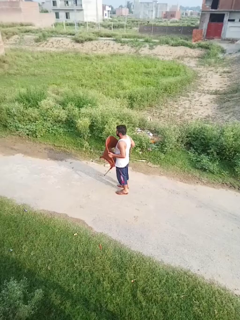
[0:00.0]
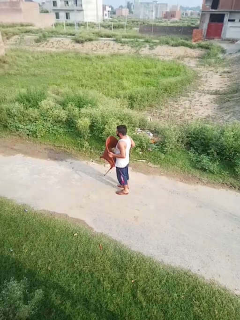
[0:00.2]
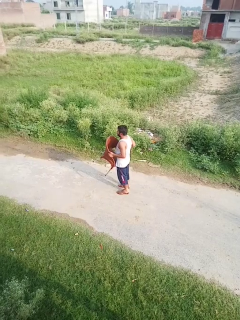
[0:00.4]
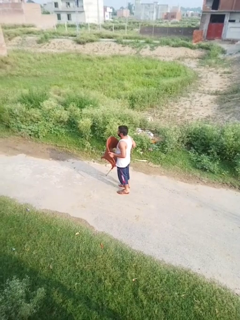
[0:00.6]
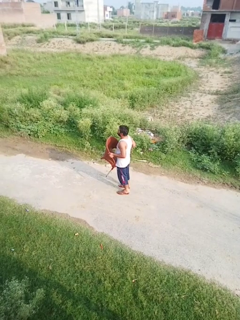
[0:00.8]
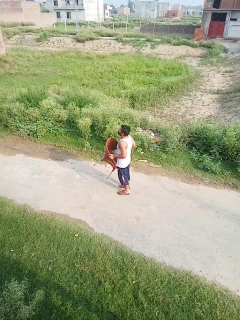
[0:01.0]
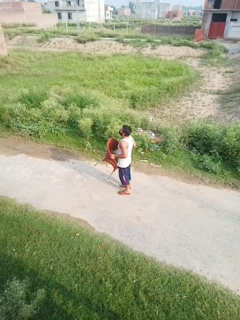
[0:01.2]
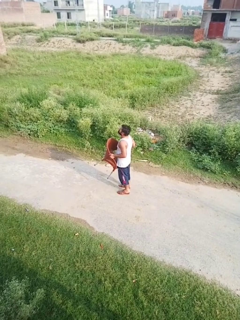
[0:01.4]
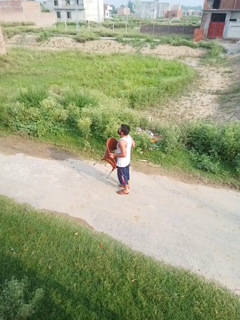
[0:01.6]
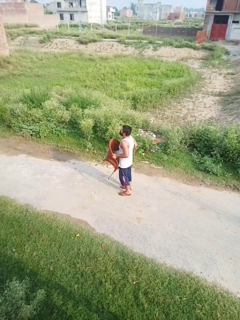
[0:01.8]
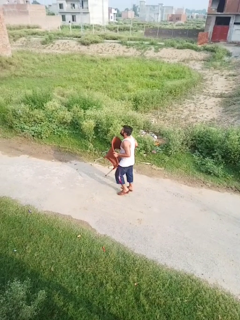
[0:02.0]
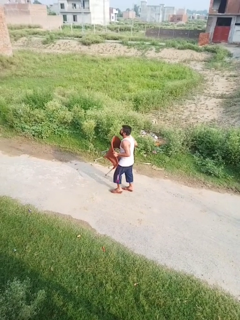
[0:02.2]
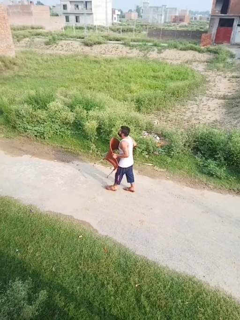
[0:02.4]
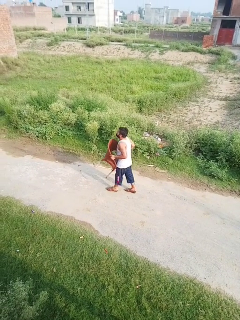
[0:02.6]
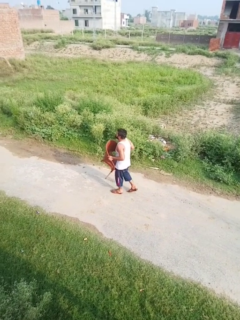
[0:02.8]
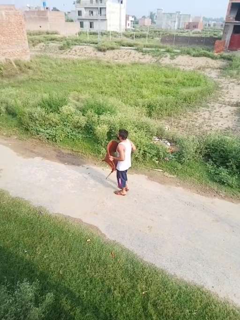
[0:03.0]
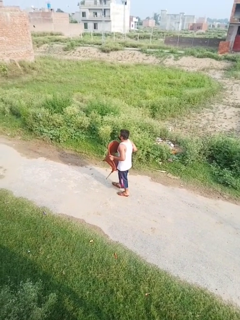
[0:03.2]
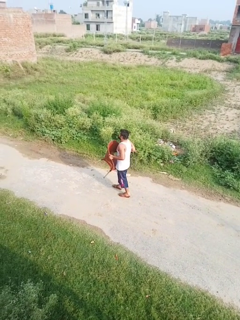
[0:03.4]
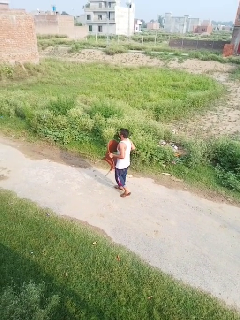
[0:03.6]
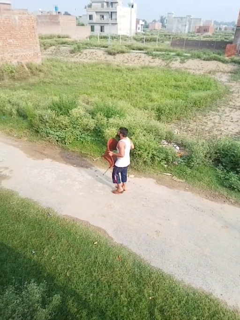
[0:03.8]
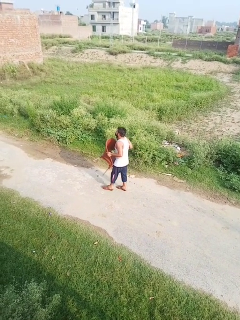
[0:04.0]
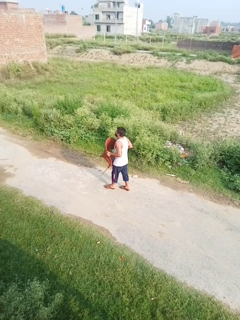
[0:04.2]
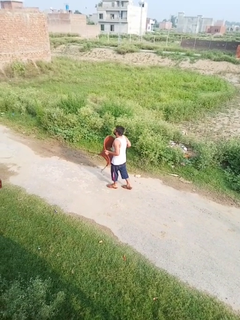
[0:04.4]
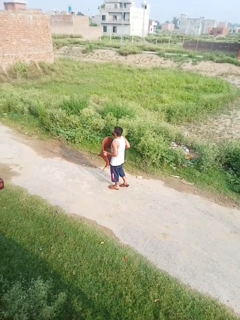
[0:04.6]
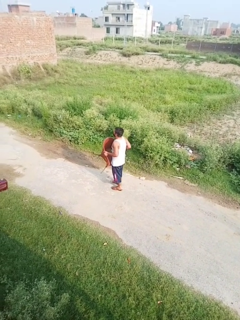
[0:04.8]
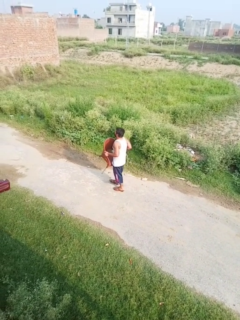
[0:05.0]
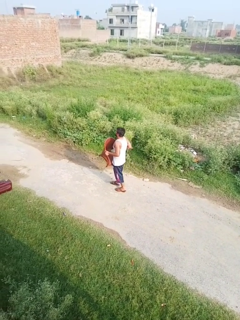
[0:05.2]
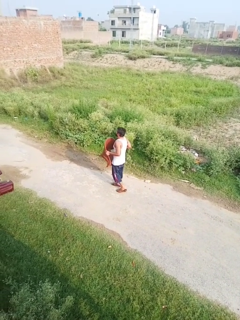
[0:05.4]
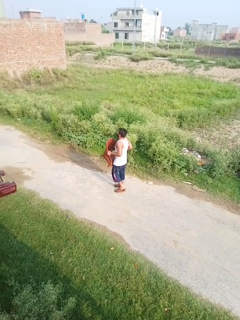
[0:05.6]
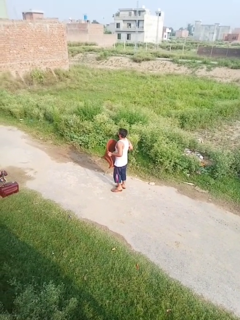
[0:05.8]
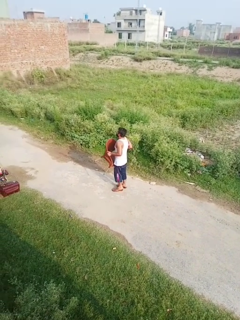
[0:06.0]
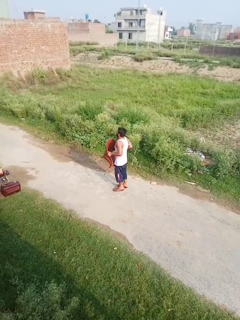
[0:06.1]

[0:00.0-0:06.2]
person carries furniture

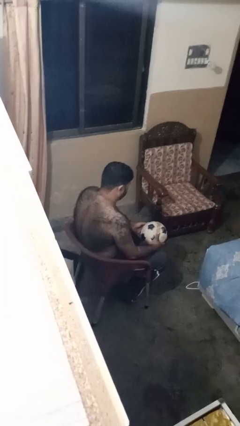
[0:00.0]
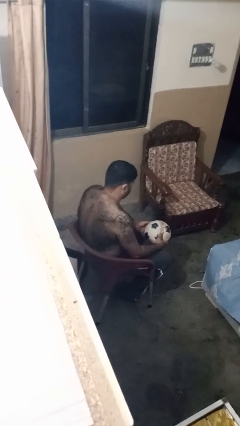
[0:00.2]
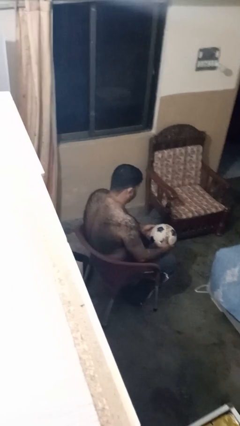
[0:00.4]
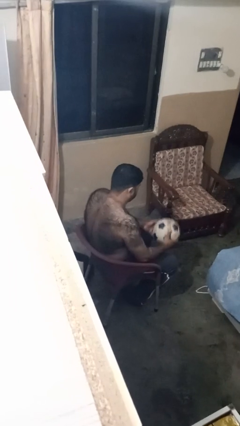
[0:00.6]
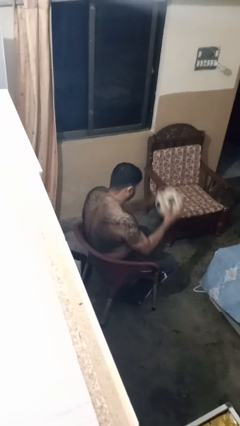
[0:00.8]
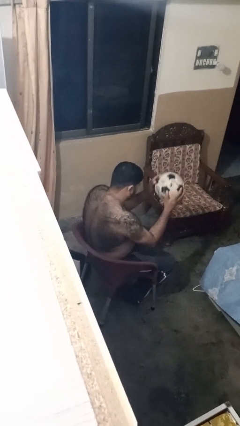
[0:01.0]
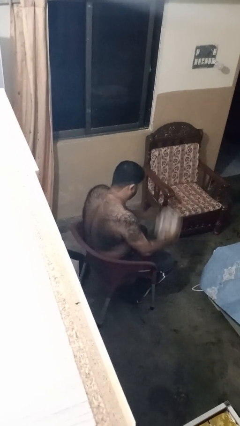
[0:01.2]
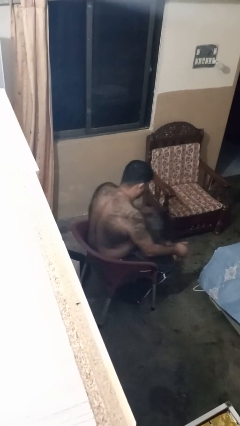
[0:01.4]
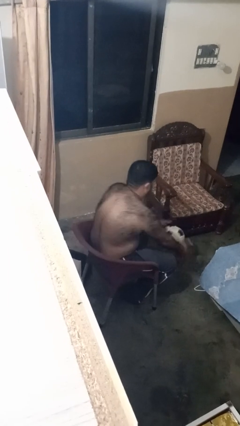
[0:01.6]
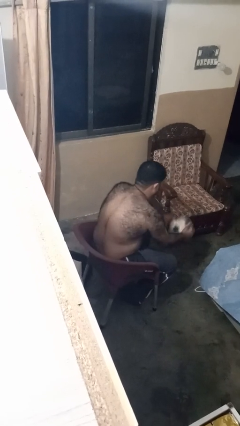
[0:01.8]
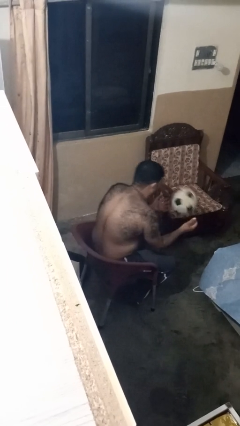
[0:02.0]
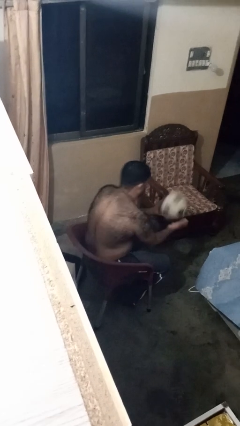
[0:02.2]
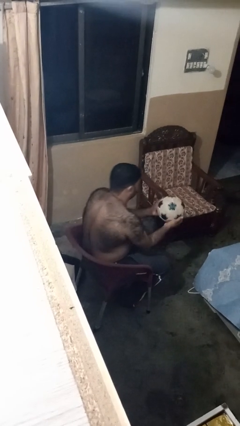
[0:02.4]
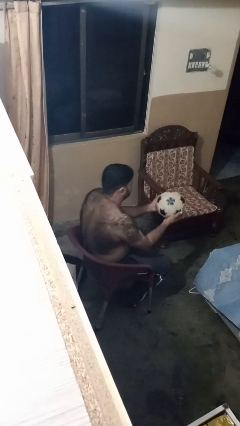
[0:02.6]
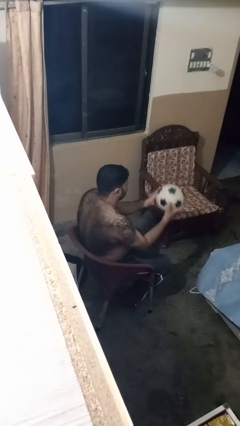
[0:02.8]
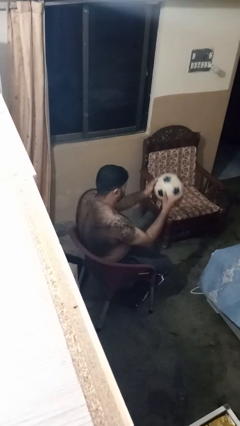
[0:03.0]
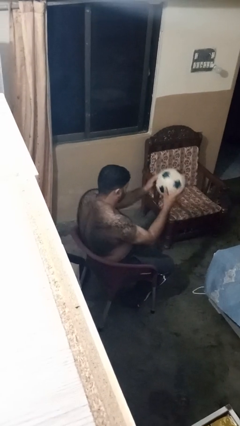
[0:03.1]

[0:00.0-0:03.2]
person bounces ball on floor

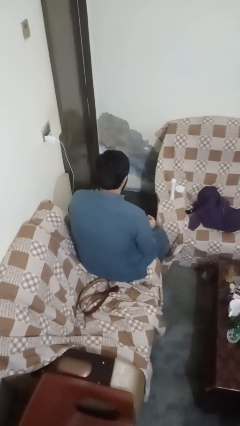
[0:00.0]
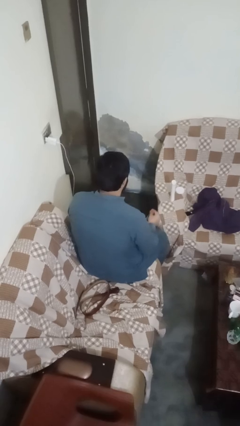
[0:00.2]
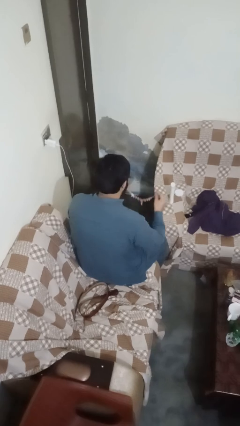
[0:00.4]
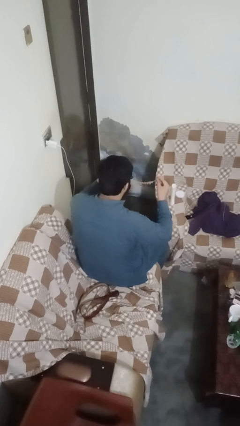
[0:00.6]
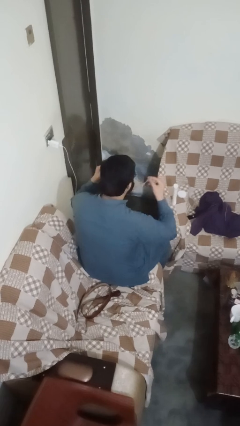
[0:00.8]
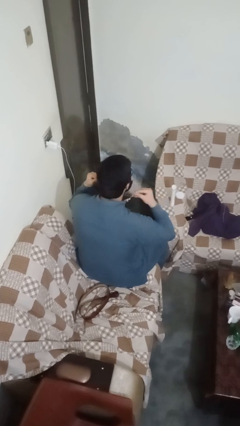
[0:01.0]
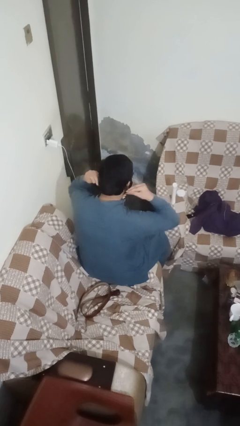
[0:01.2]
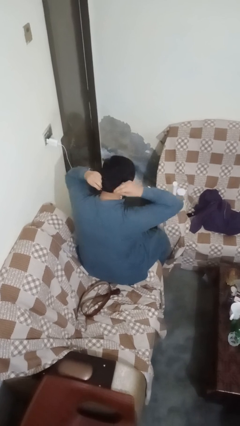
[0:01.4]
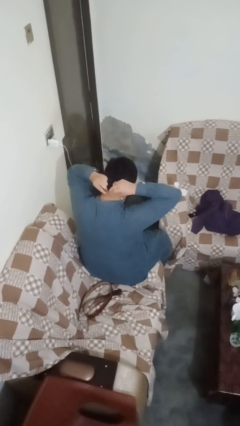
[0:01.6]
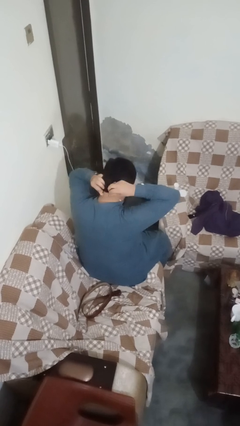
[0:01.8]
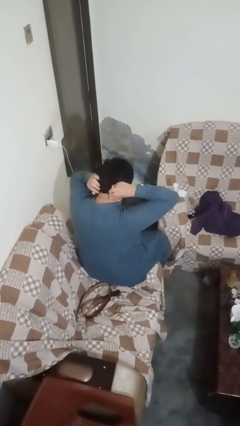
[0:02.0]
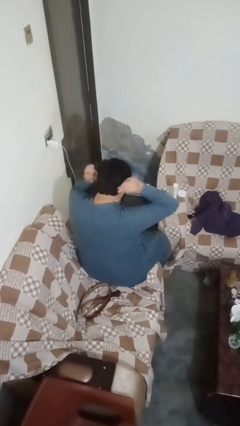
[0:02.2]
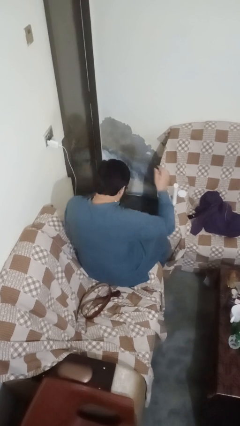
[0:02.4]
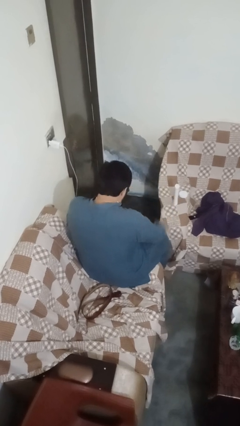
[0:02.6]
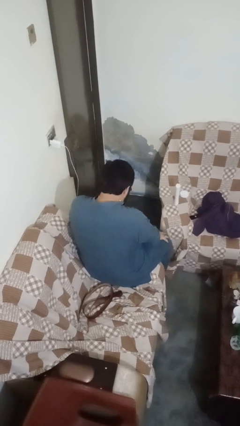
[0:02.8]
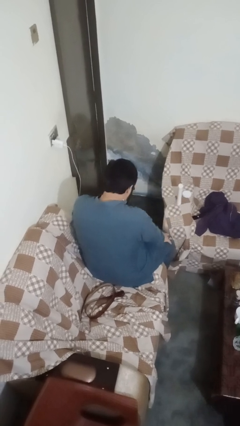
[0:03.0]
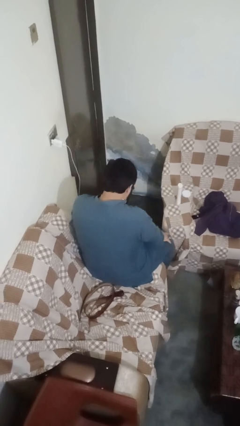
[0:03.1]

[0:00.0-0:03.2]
person puts on necklace

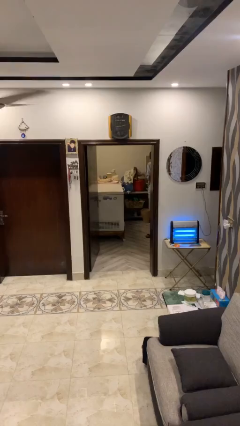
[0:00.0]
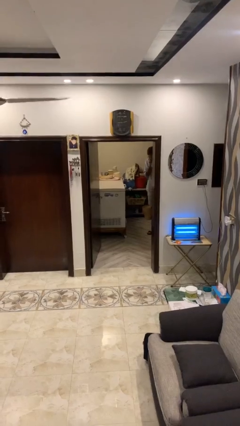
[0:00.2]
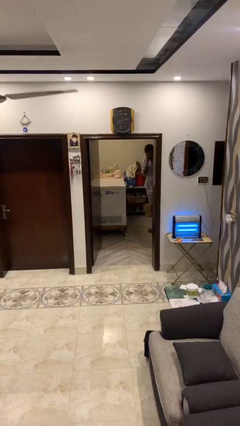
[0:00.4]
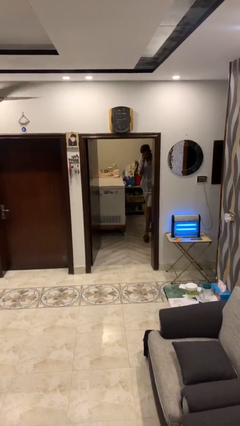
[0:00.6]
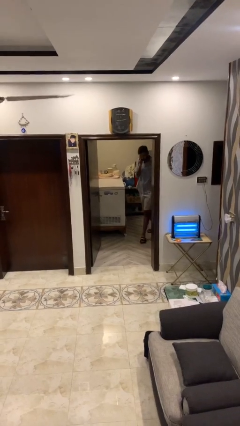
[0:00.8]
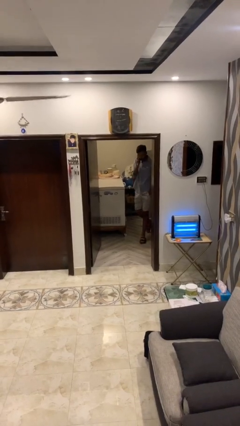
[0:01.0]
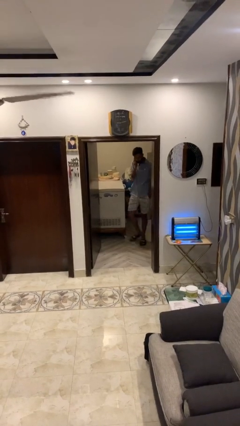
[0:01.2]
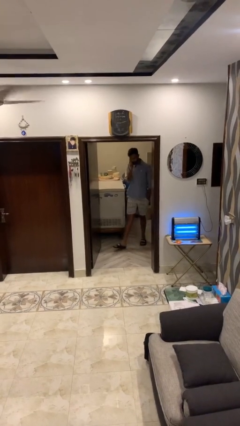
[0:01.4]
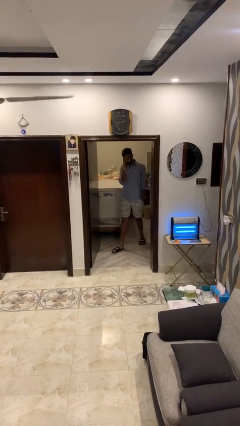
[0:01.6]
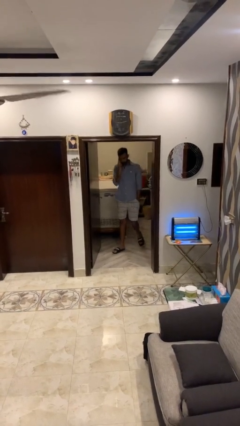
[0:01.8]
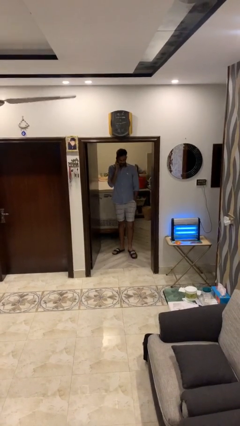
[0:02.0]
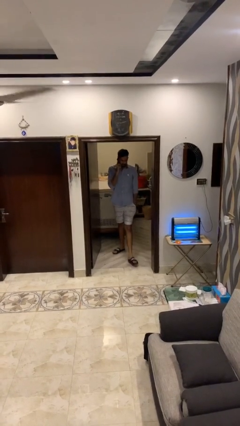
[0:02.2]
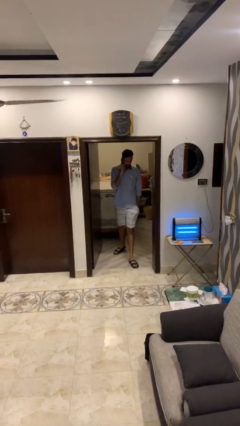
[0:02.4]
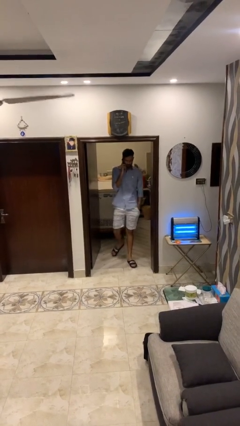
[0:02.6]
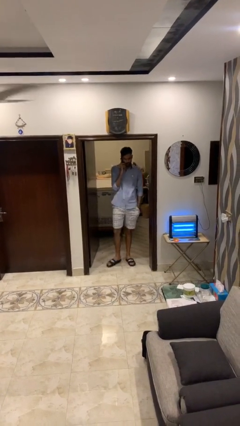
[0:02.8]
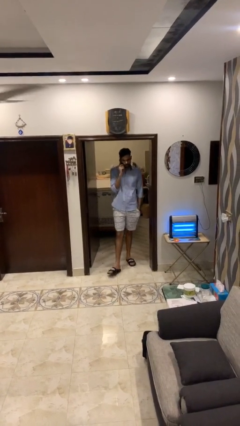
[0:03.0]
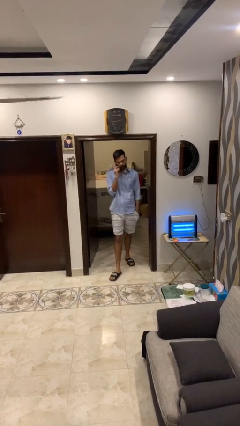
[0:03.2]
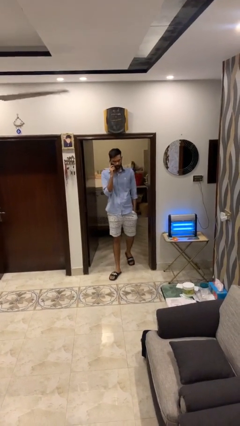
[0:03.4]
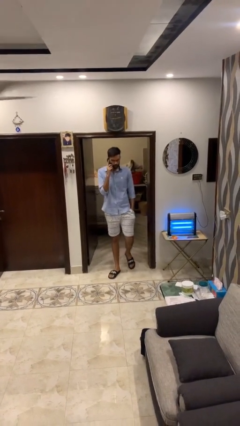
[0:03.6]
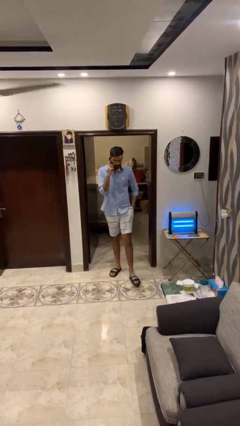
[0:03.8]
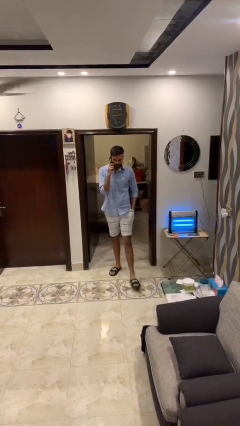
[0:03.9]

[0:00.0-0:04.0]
person enters scene through structure

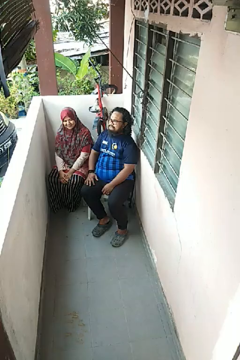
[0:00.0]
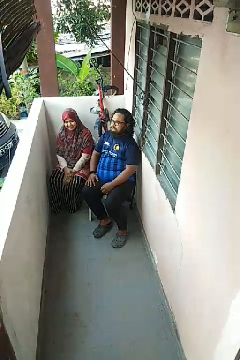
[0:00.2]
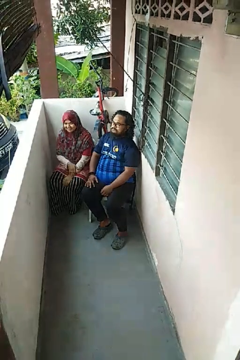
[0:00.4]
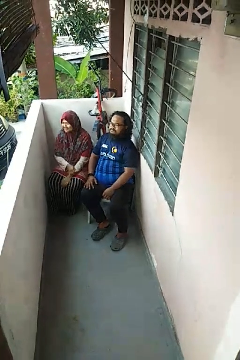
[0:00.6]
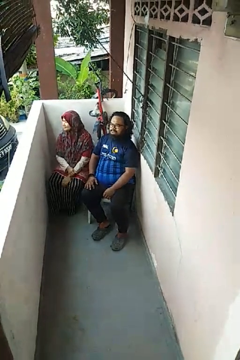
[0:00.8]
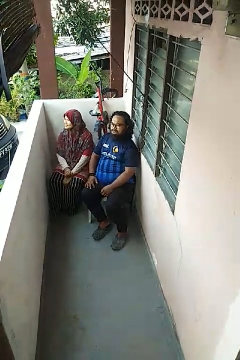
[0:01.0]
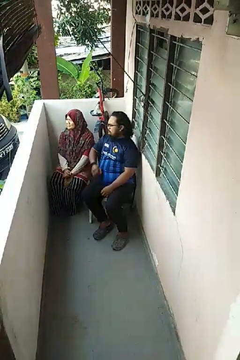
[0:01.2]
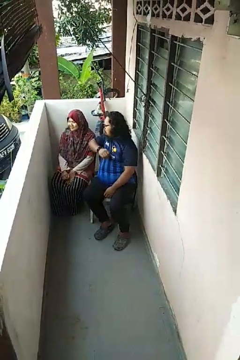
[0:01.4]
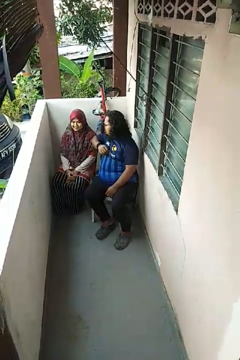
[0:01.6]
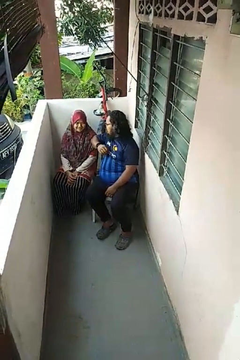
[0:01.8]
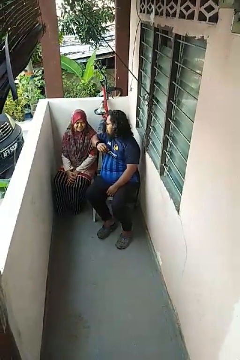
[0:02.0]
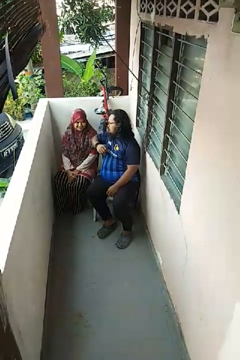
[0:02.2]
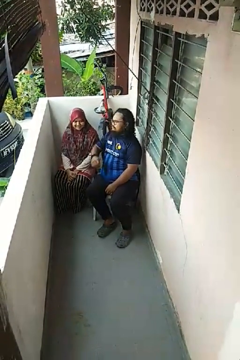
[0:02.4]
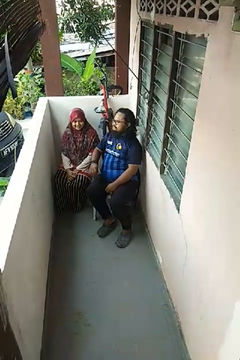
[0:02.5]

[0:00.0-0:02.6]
person nudges person with elbow

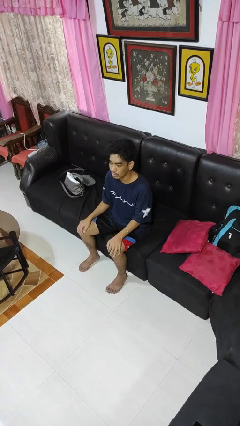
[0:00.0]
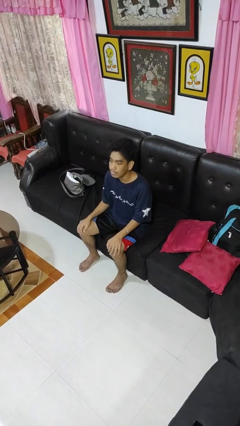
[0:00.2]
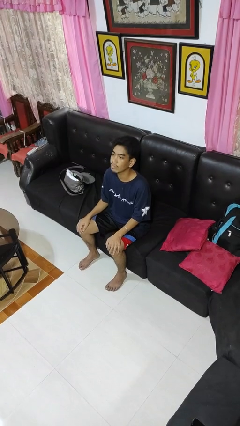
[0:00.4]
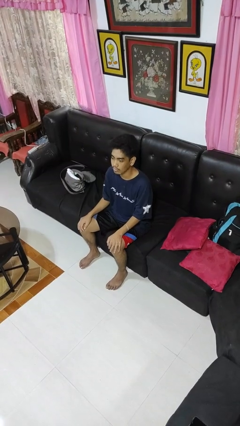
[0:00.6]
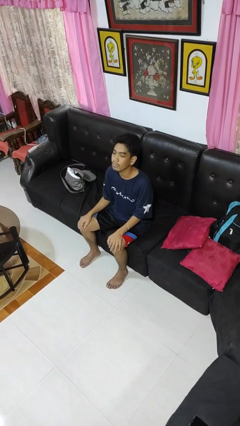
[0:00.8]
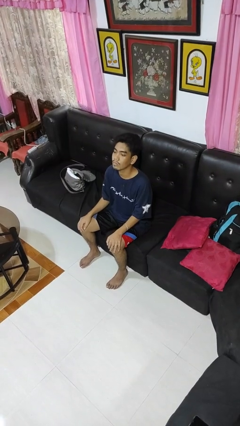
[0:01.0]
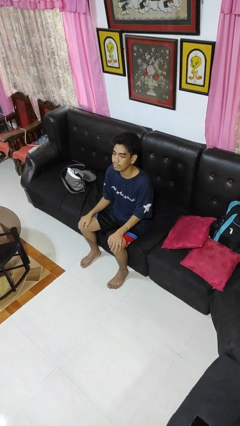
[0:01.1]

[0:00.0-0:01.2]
person nods head
